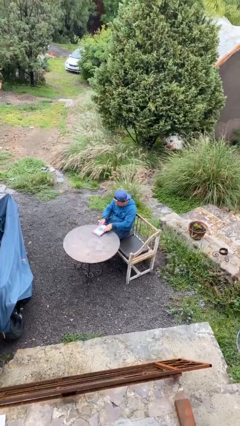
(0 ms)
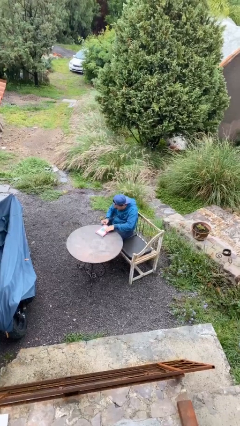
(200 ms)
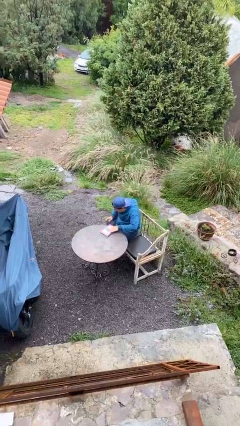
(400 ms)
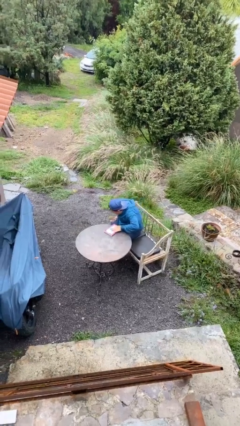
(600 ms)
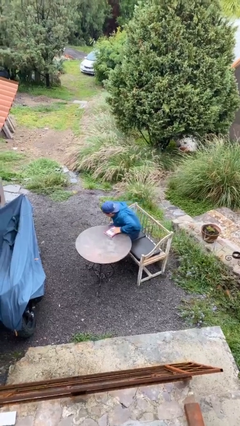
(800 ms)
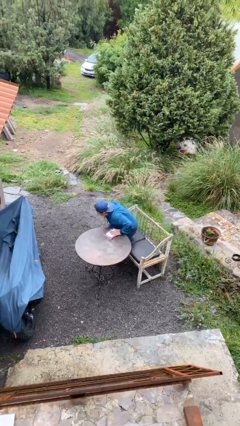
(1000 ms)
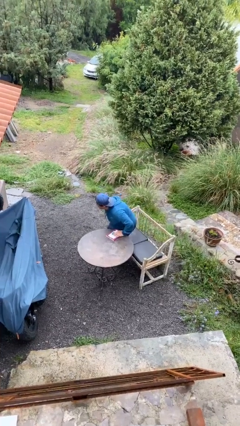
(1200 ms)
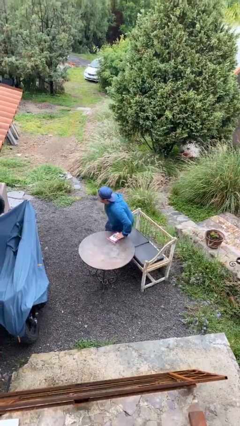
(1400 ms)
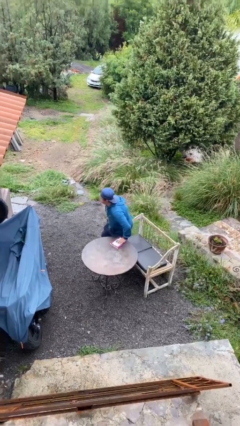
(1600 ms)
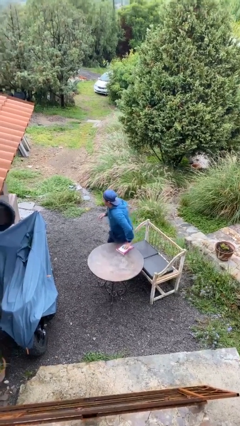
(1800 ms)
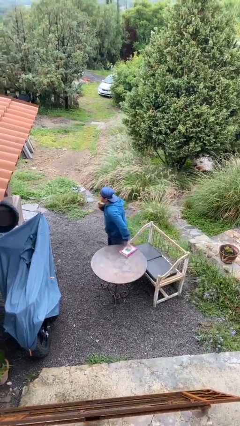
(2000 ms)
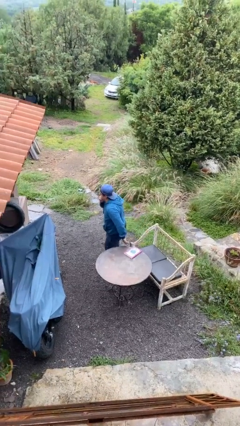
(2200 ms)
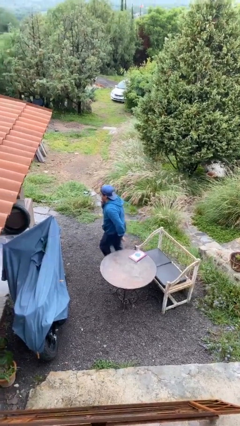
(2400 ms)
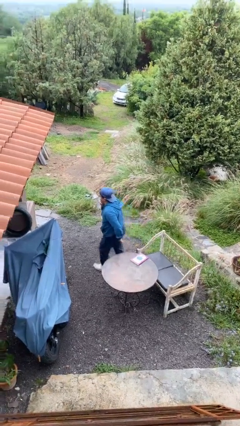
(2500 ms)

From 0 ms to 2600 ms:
person stands up

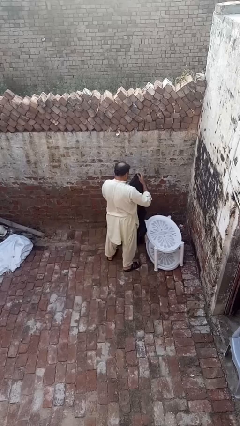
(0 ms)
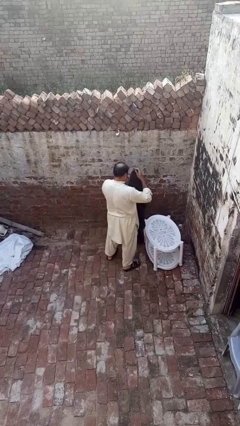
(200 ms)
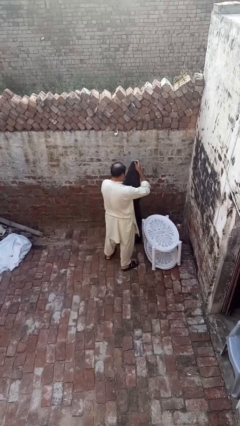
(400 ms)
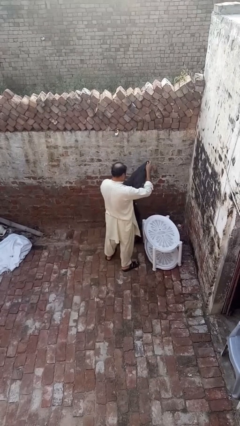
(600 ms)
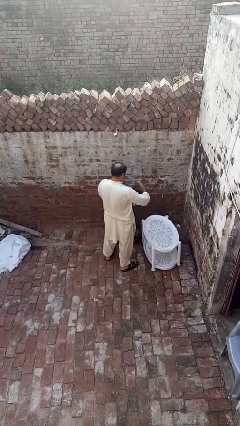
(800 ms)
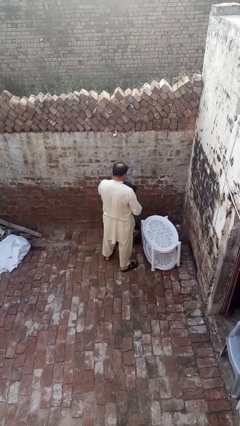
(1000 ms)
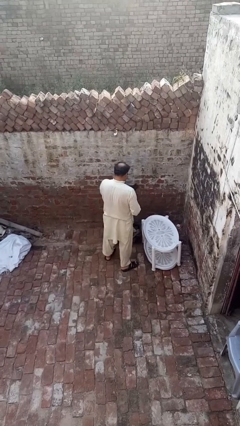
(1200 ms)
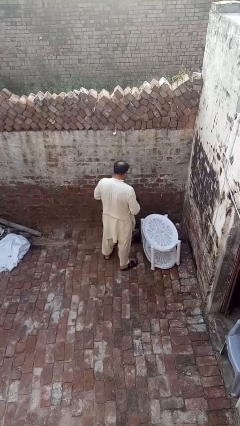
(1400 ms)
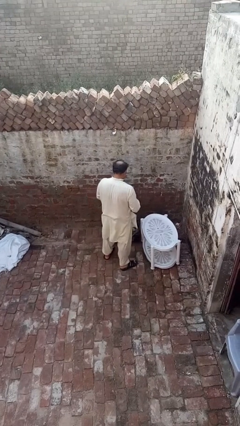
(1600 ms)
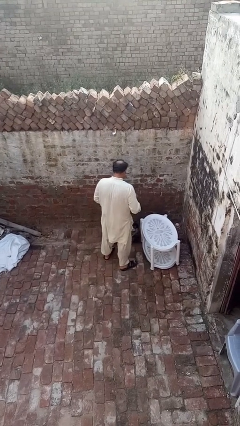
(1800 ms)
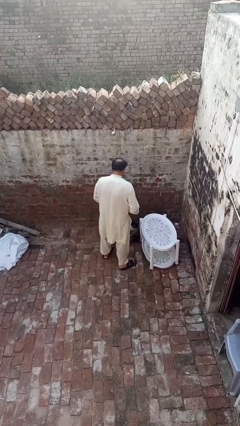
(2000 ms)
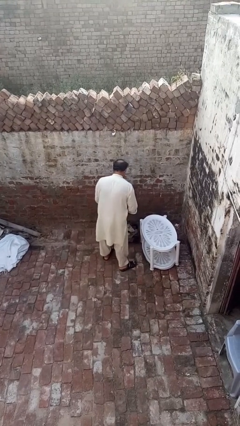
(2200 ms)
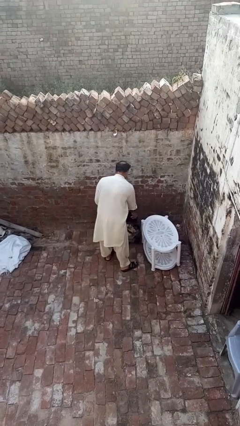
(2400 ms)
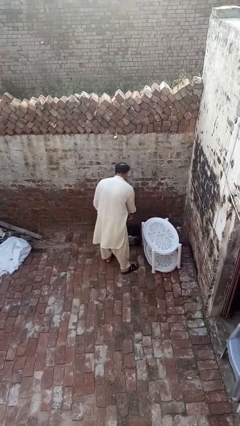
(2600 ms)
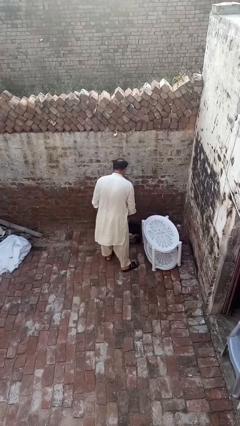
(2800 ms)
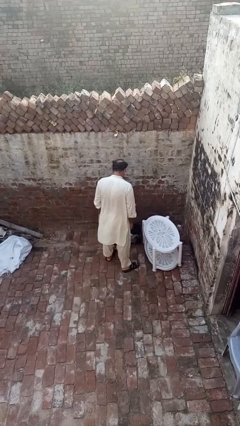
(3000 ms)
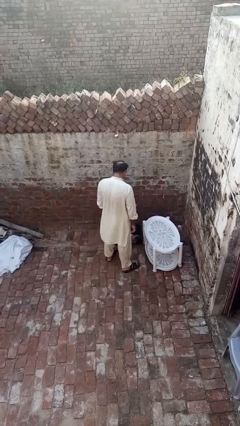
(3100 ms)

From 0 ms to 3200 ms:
person folds pants

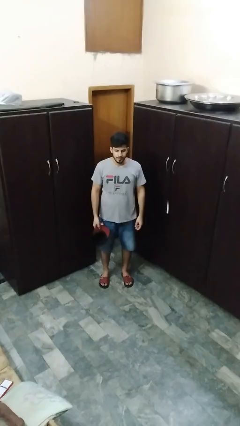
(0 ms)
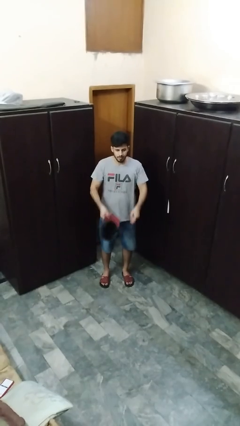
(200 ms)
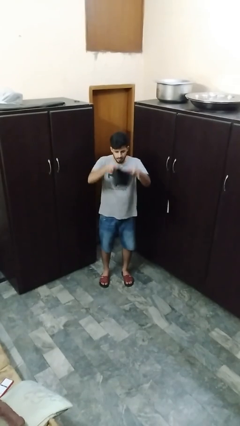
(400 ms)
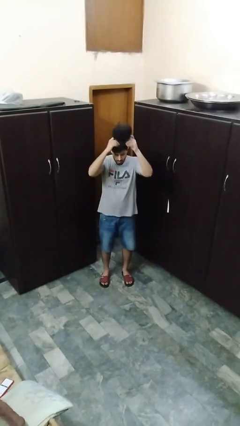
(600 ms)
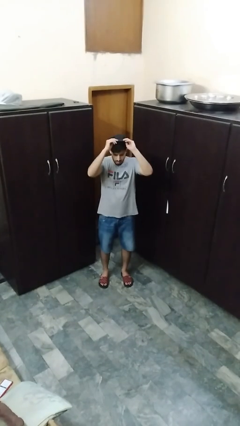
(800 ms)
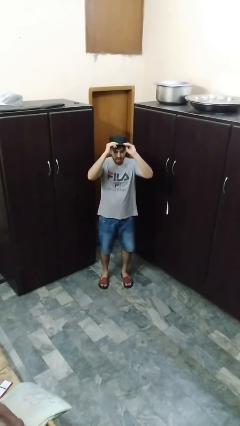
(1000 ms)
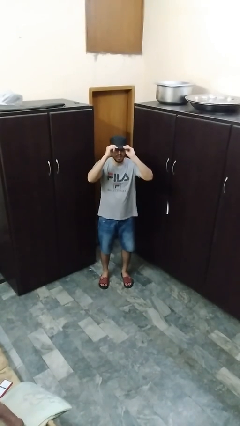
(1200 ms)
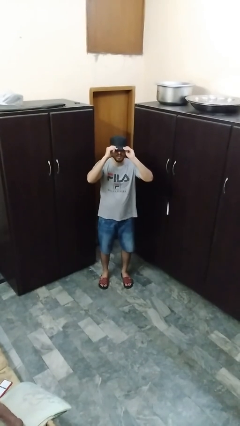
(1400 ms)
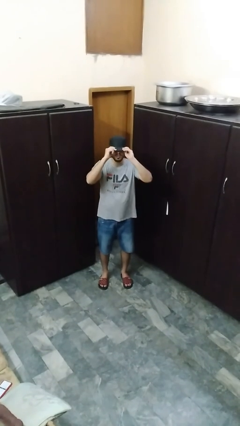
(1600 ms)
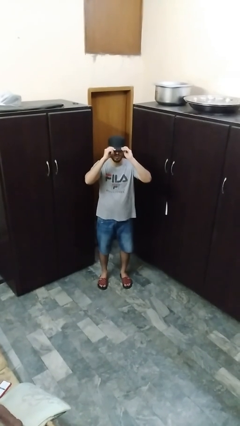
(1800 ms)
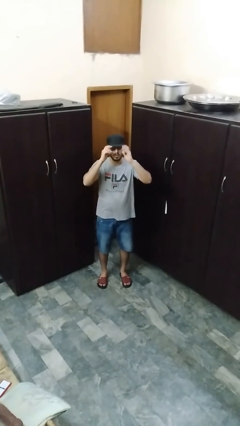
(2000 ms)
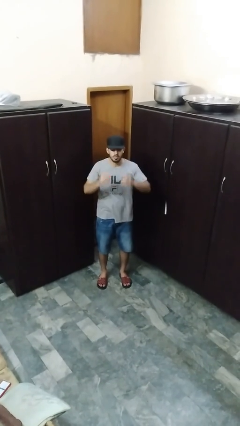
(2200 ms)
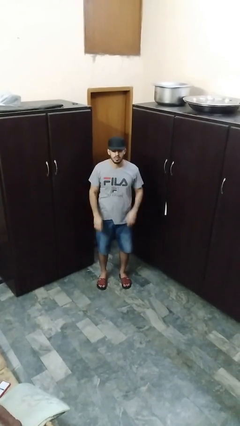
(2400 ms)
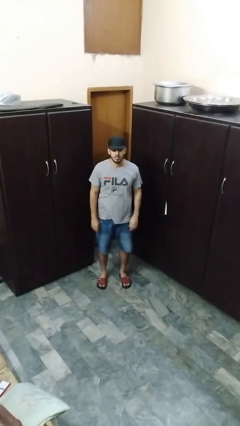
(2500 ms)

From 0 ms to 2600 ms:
person puts on hat

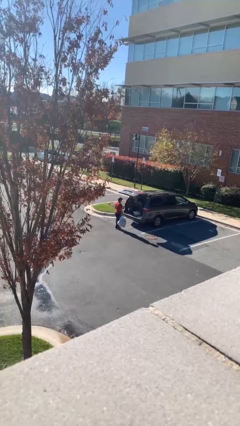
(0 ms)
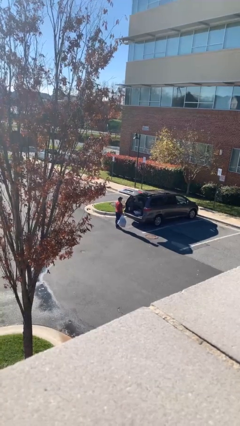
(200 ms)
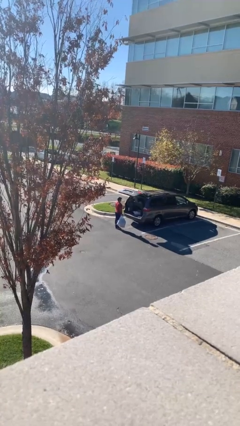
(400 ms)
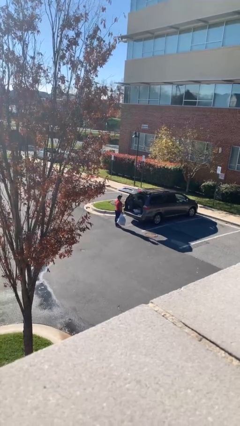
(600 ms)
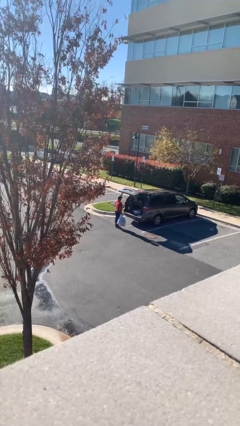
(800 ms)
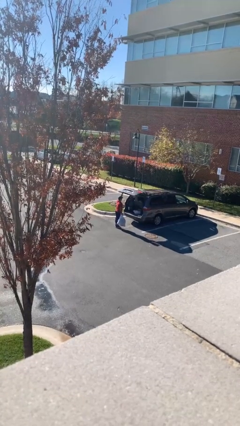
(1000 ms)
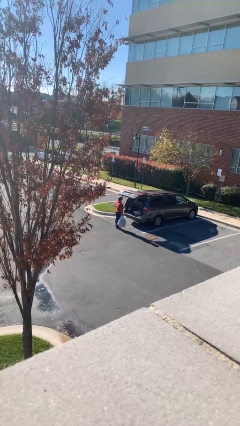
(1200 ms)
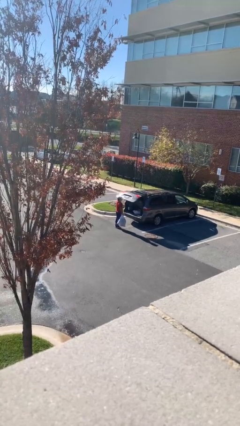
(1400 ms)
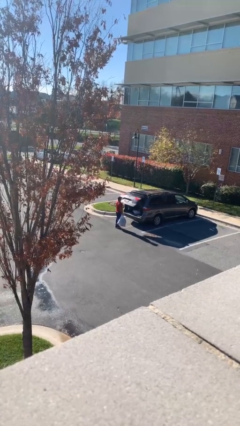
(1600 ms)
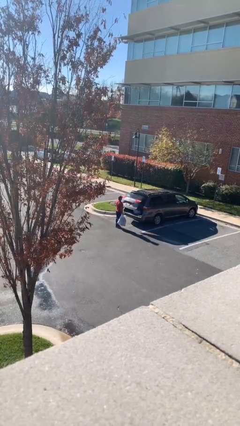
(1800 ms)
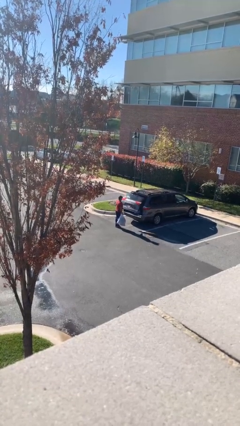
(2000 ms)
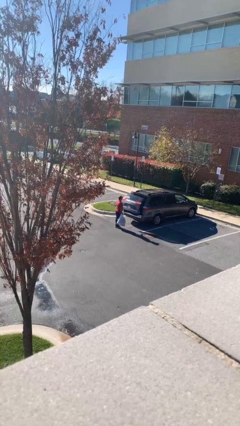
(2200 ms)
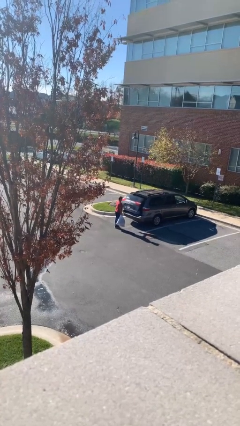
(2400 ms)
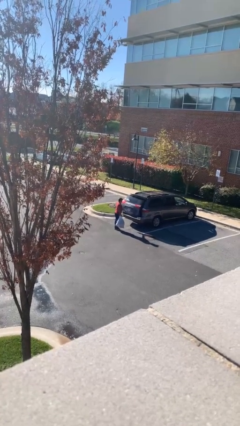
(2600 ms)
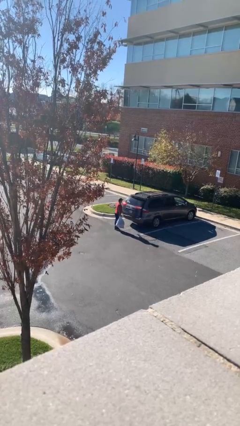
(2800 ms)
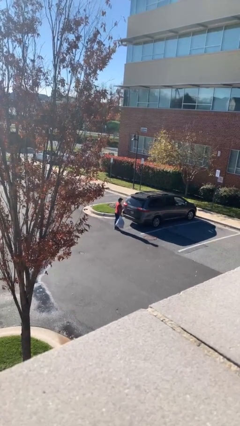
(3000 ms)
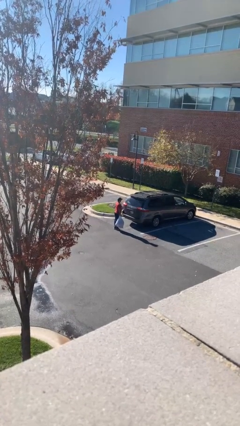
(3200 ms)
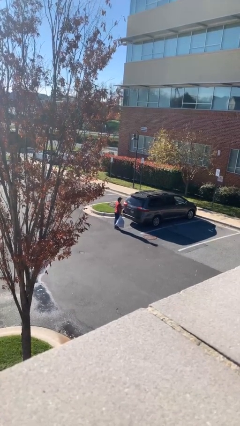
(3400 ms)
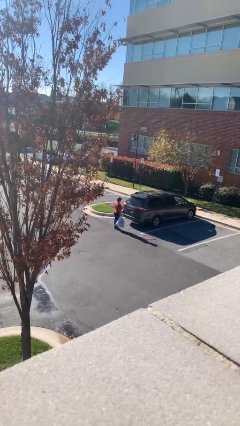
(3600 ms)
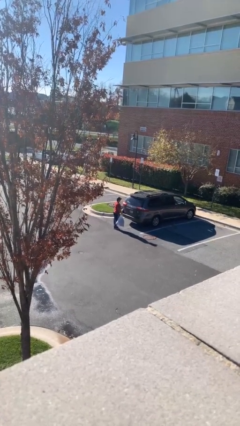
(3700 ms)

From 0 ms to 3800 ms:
person closes car trunk

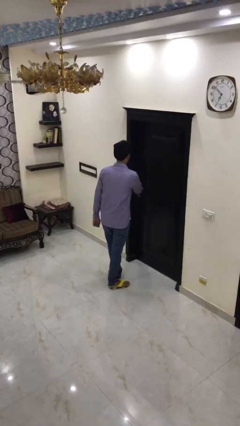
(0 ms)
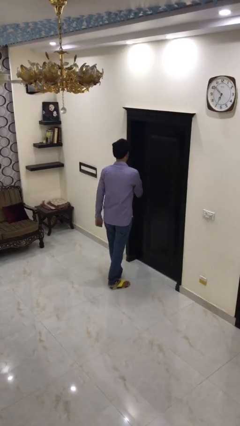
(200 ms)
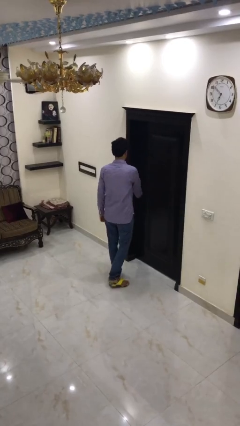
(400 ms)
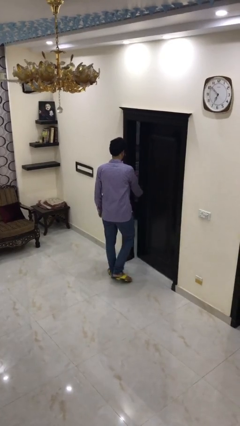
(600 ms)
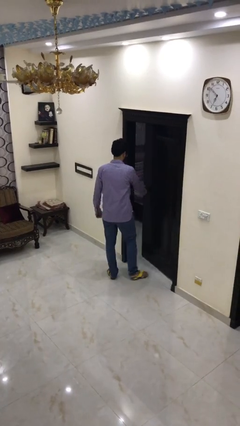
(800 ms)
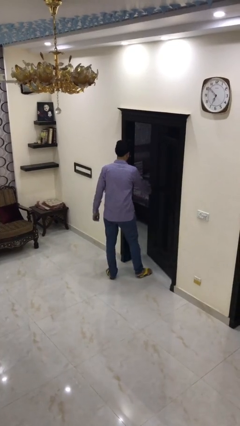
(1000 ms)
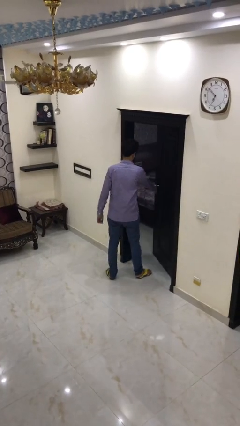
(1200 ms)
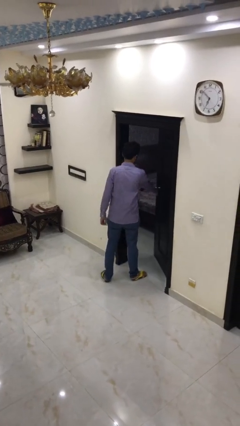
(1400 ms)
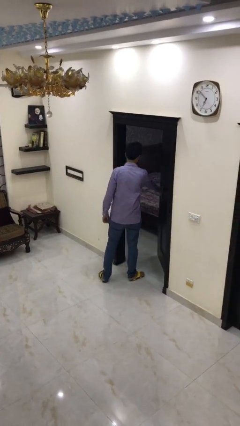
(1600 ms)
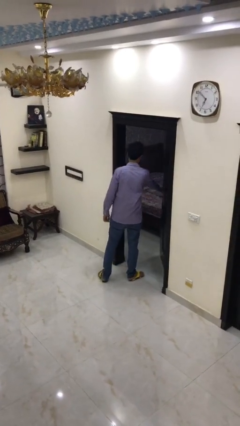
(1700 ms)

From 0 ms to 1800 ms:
person opens facility door

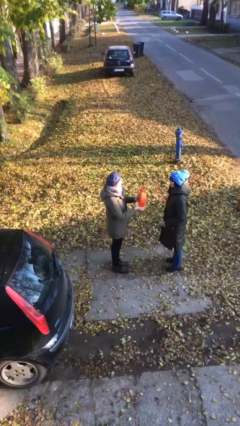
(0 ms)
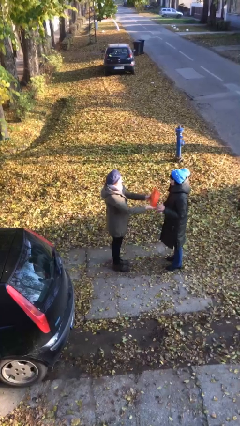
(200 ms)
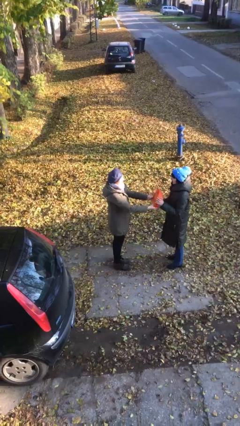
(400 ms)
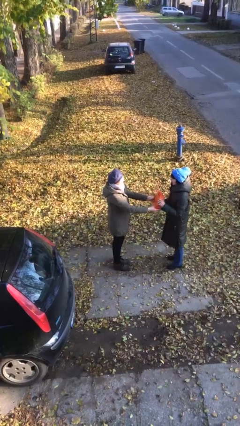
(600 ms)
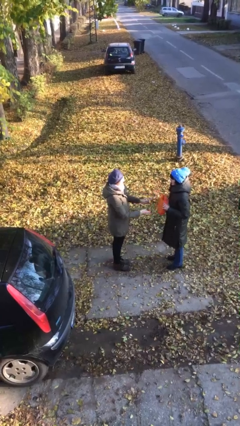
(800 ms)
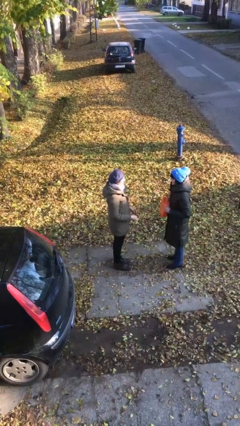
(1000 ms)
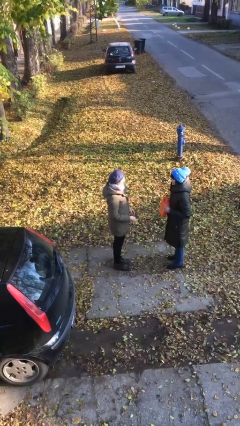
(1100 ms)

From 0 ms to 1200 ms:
person transfers object to person

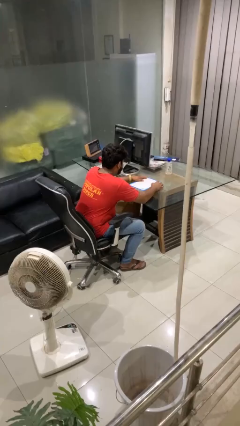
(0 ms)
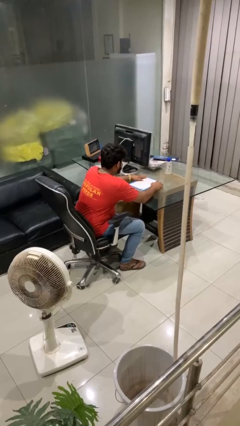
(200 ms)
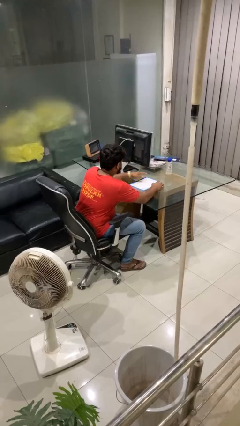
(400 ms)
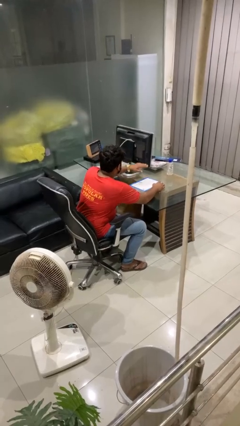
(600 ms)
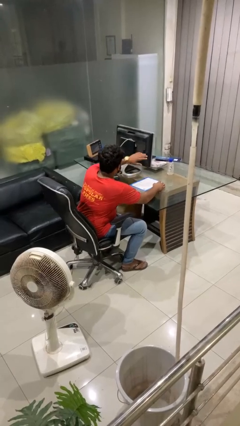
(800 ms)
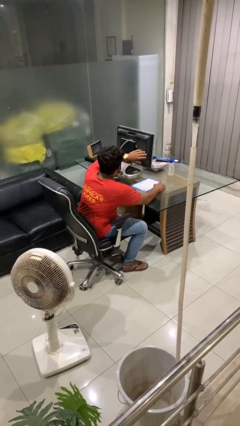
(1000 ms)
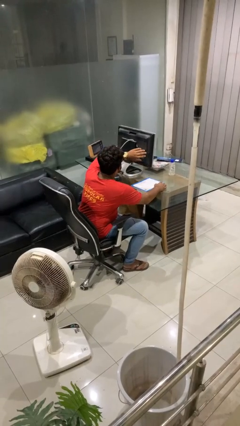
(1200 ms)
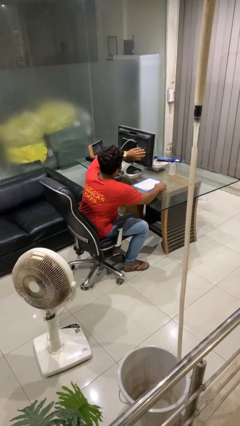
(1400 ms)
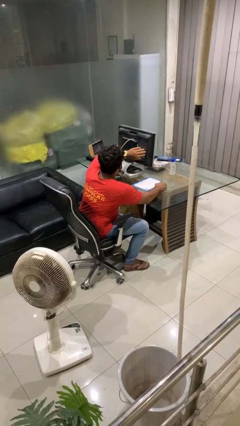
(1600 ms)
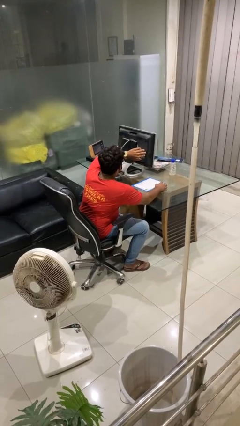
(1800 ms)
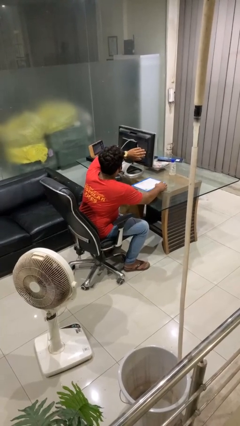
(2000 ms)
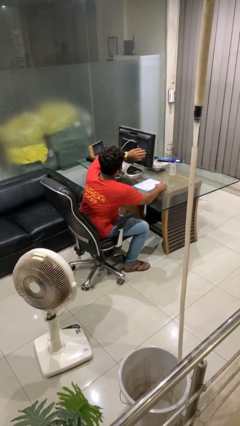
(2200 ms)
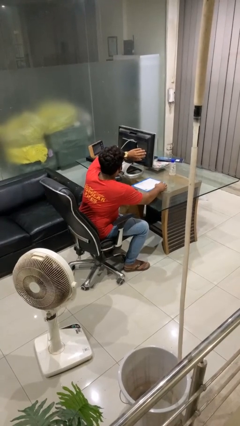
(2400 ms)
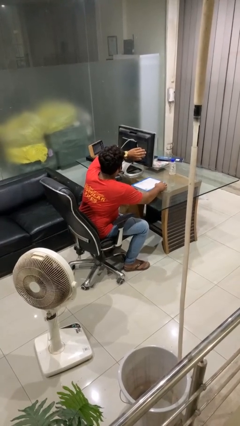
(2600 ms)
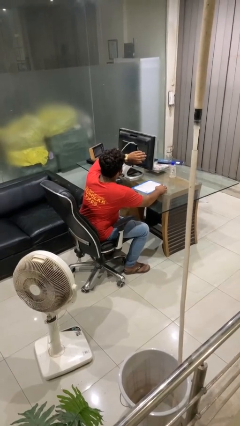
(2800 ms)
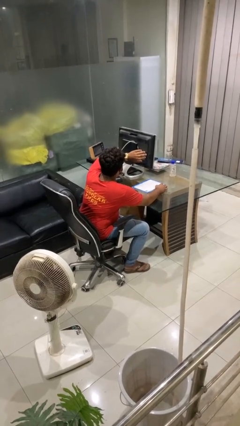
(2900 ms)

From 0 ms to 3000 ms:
person looks at wristwatch
